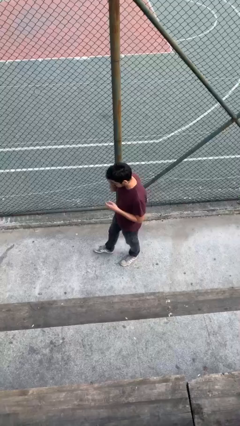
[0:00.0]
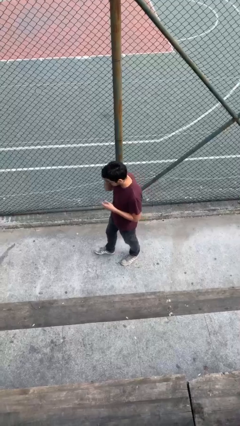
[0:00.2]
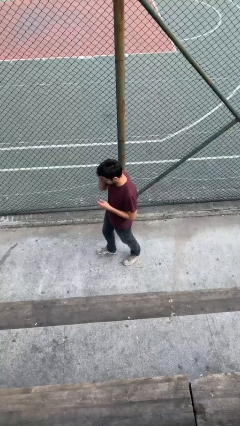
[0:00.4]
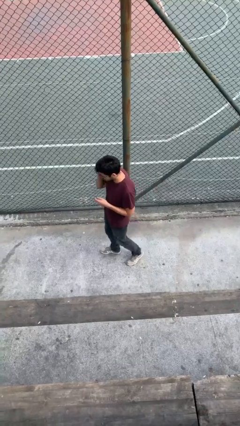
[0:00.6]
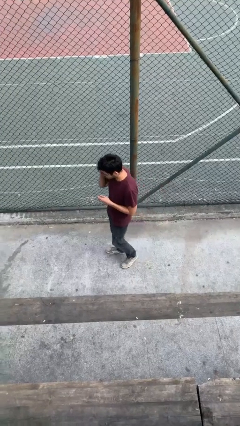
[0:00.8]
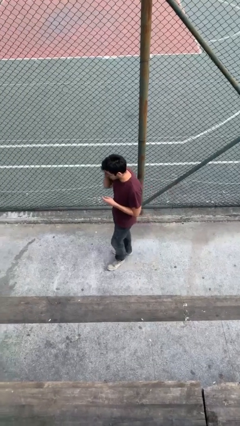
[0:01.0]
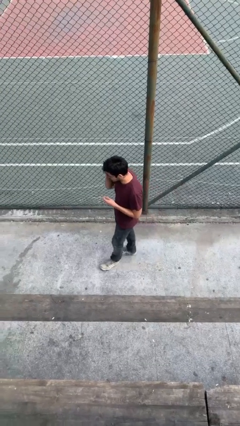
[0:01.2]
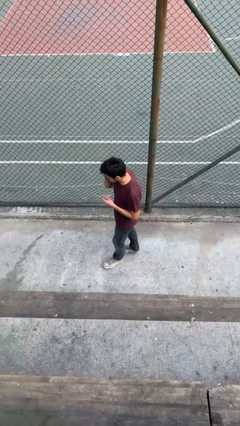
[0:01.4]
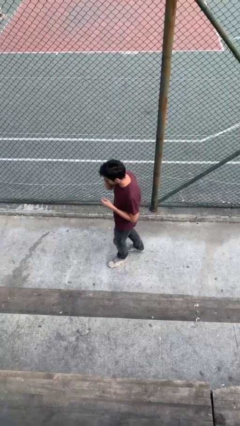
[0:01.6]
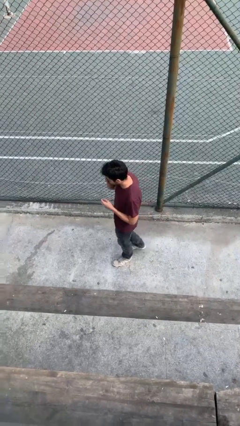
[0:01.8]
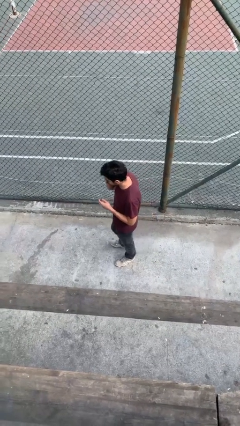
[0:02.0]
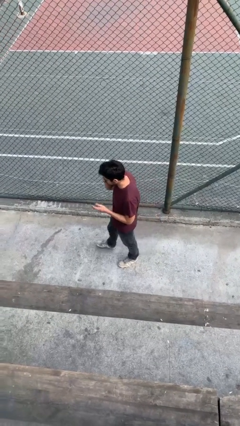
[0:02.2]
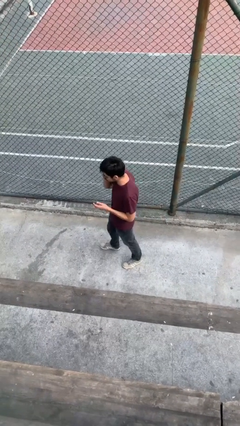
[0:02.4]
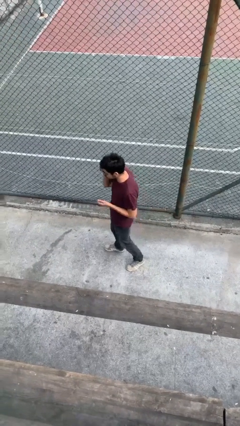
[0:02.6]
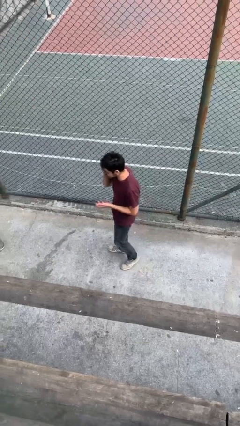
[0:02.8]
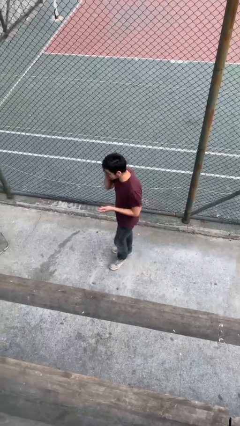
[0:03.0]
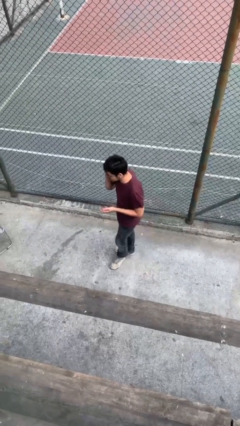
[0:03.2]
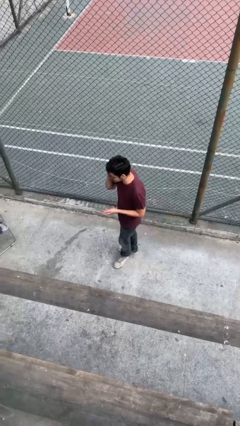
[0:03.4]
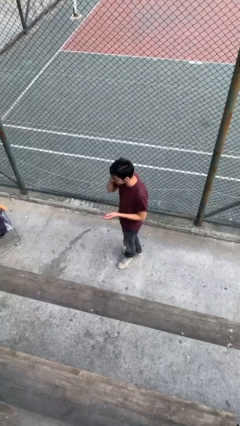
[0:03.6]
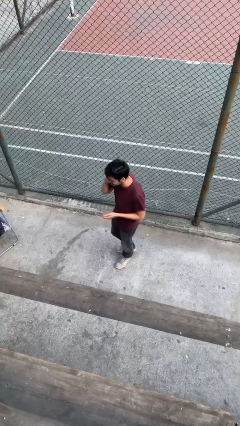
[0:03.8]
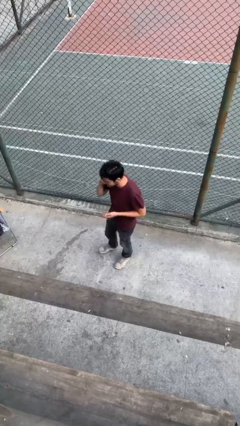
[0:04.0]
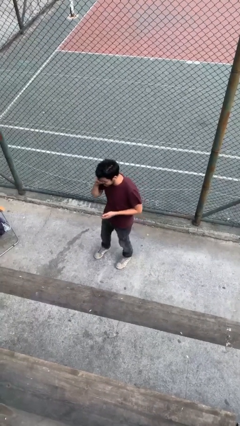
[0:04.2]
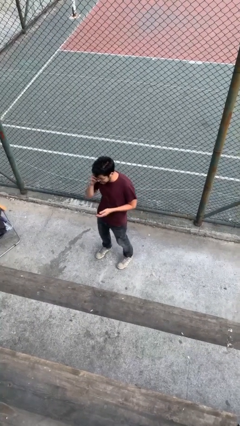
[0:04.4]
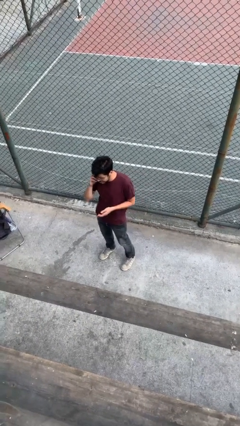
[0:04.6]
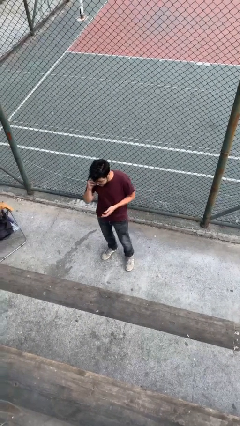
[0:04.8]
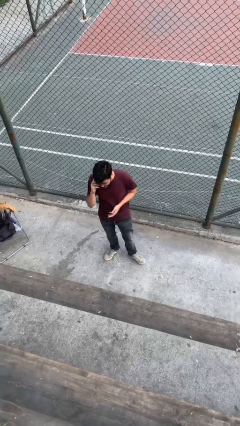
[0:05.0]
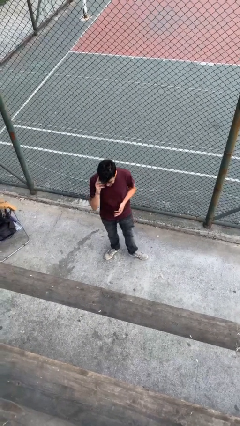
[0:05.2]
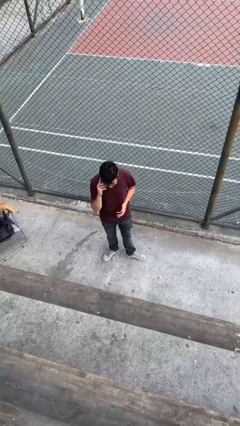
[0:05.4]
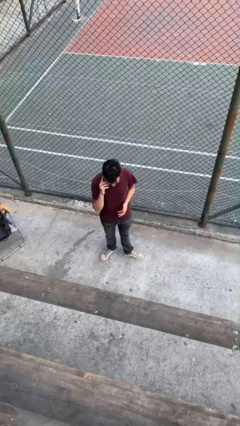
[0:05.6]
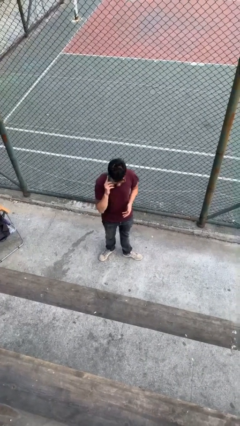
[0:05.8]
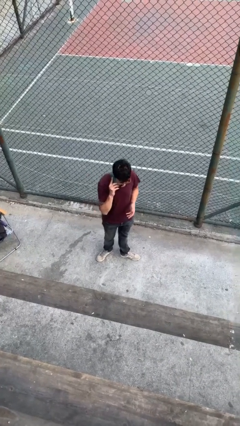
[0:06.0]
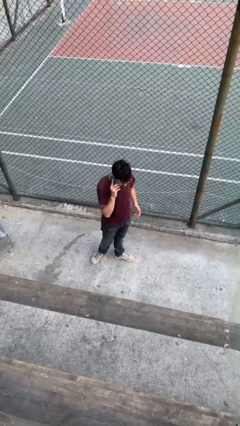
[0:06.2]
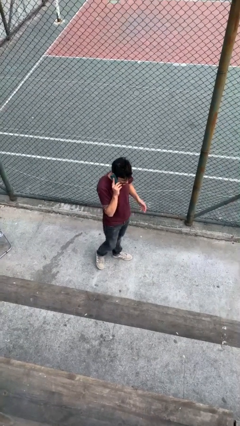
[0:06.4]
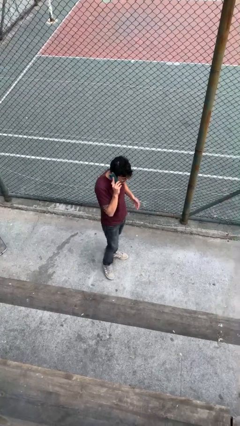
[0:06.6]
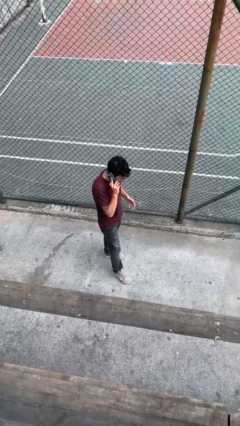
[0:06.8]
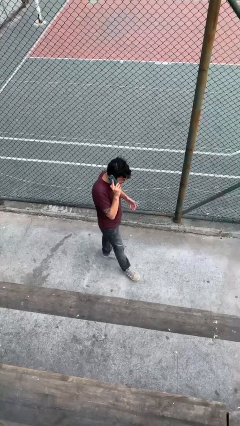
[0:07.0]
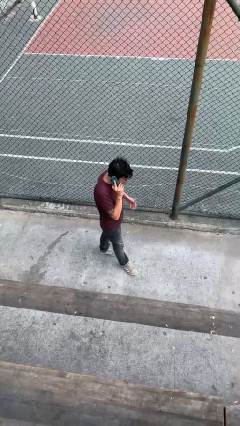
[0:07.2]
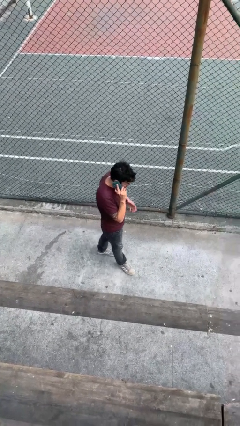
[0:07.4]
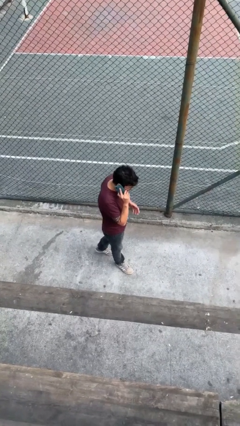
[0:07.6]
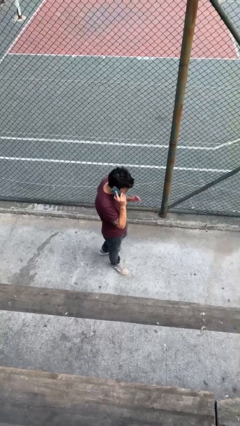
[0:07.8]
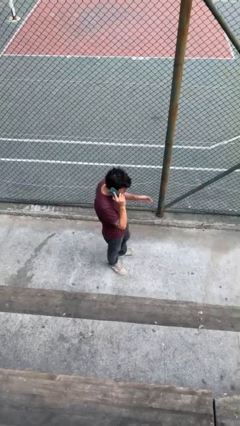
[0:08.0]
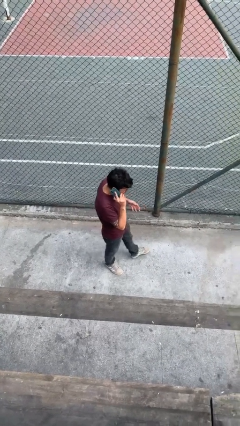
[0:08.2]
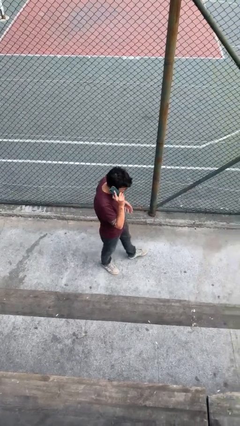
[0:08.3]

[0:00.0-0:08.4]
person talks on phone

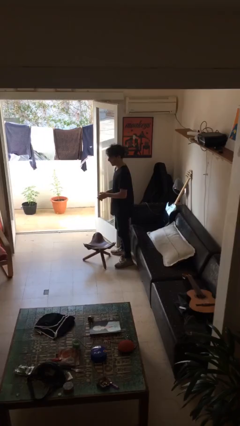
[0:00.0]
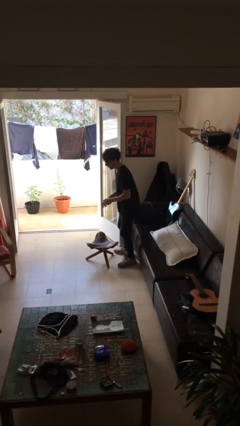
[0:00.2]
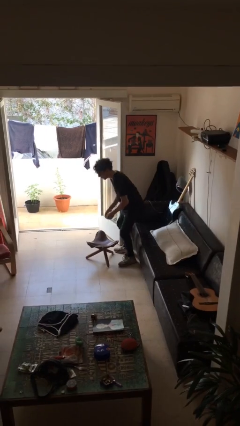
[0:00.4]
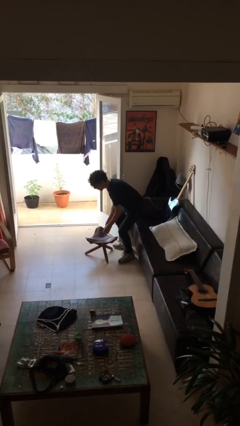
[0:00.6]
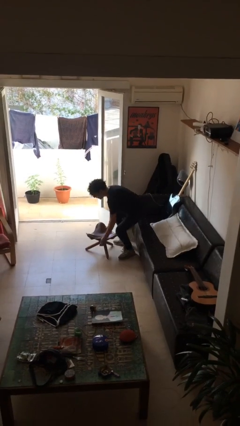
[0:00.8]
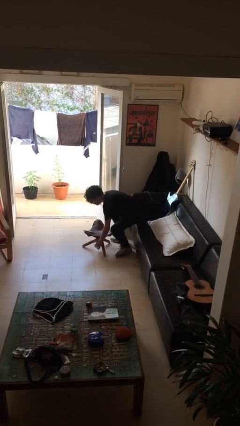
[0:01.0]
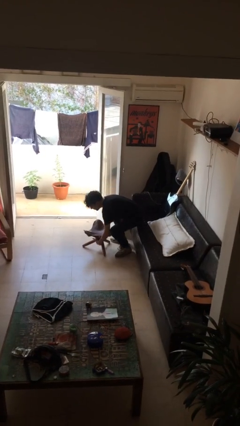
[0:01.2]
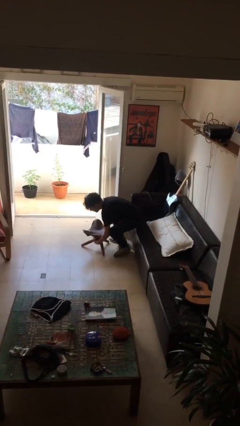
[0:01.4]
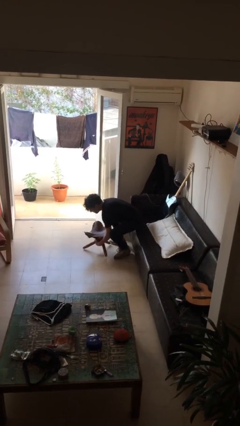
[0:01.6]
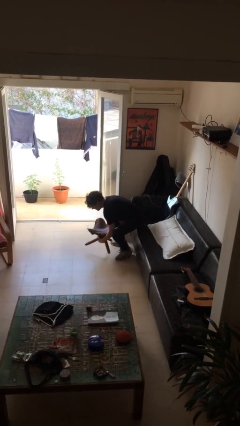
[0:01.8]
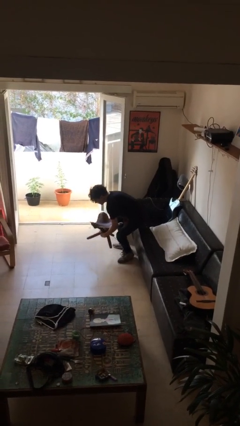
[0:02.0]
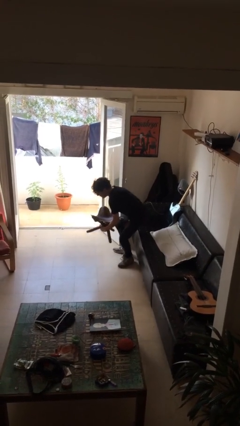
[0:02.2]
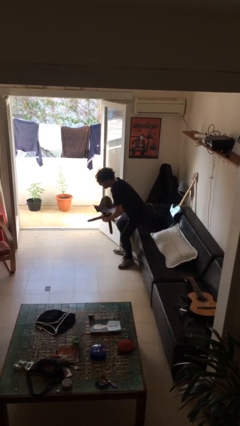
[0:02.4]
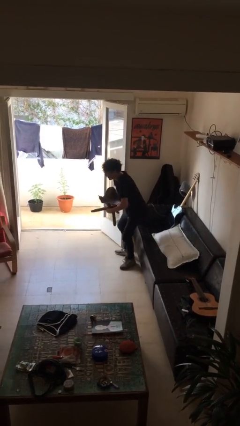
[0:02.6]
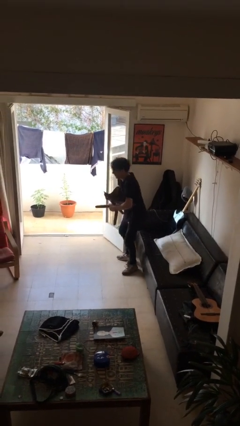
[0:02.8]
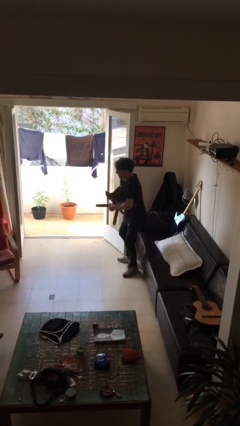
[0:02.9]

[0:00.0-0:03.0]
person picks up object from floor

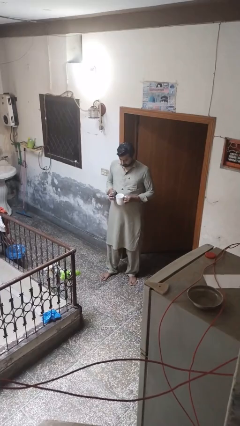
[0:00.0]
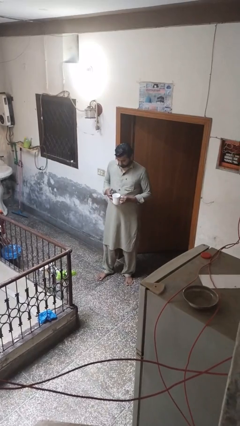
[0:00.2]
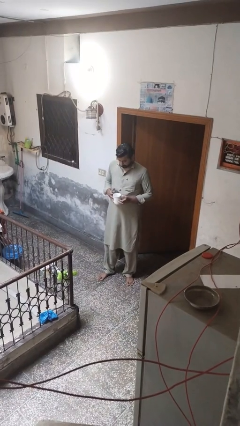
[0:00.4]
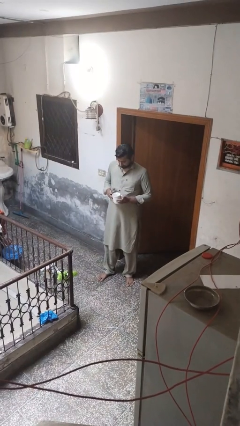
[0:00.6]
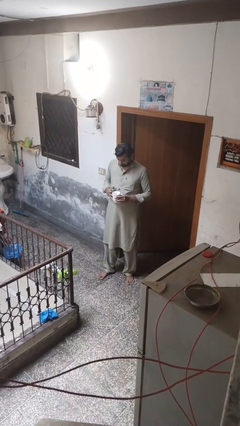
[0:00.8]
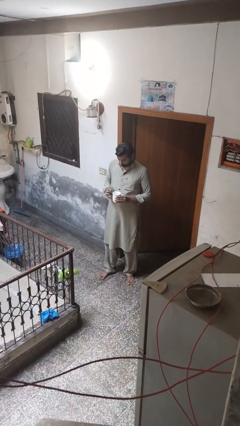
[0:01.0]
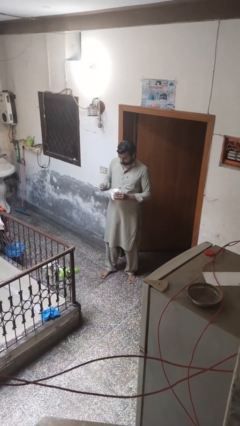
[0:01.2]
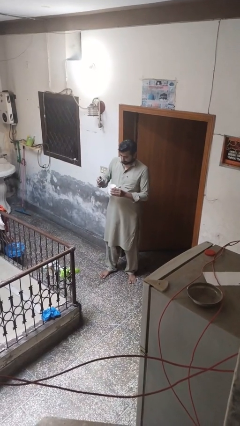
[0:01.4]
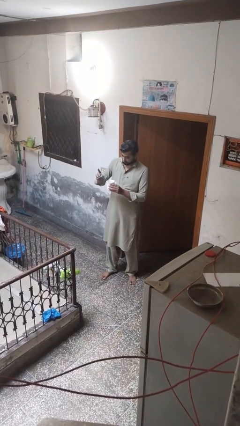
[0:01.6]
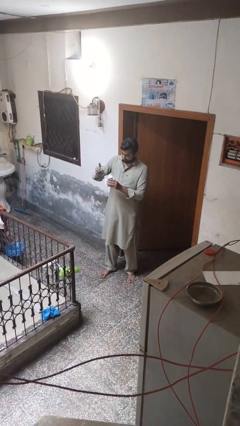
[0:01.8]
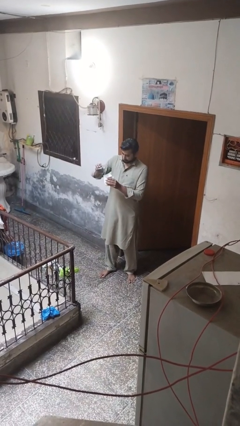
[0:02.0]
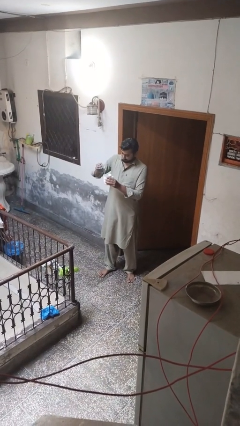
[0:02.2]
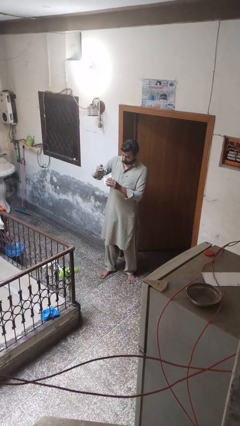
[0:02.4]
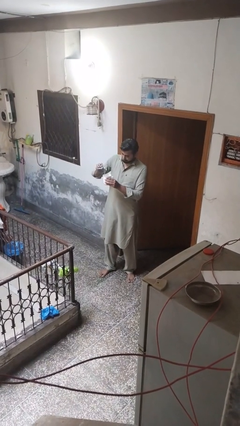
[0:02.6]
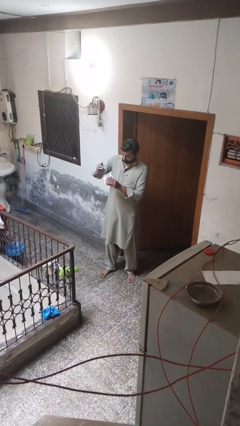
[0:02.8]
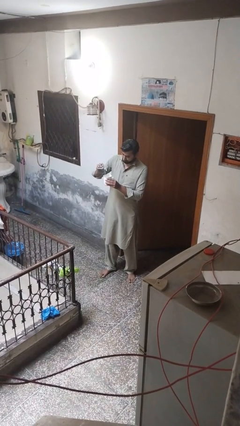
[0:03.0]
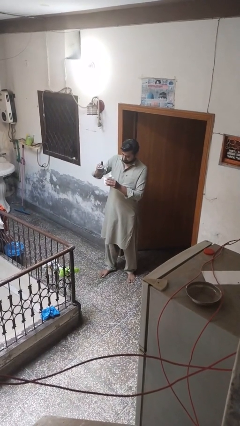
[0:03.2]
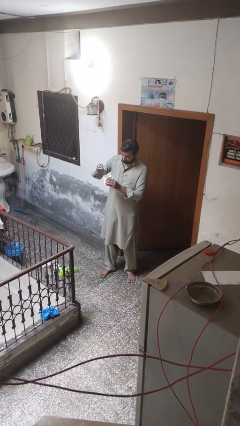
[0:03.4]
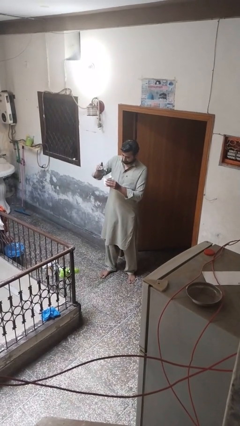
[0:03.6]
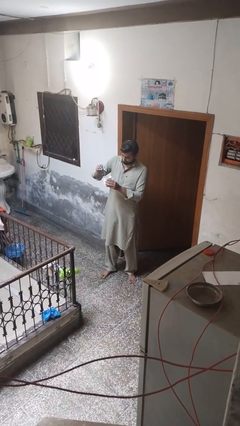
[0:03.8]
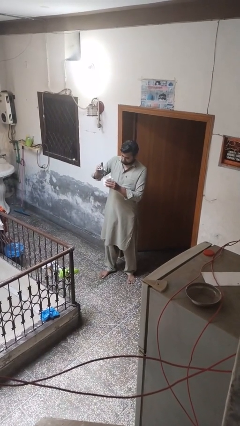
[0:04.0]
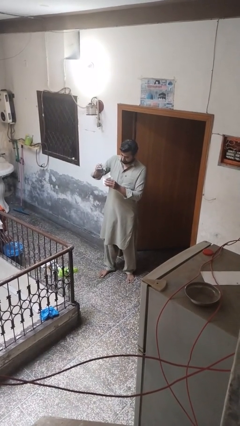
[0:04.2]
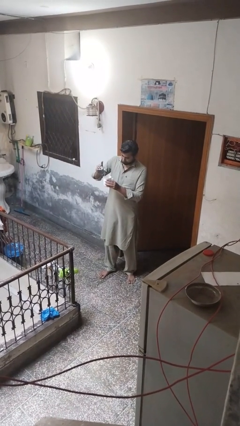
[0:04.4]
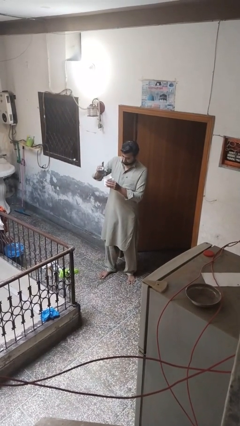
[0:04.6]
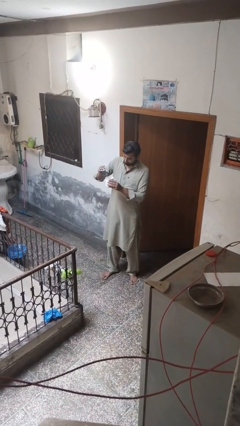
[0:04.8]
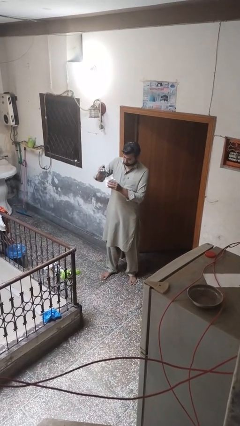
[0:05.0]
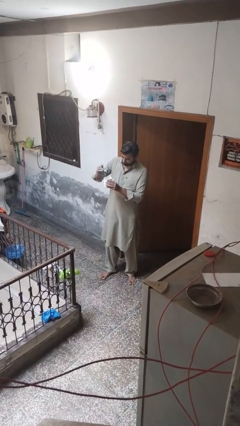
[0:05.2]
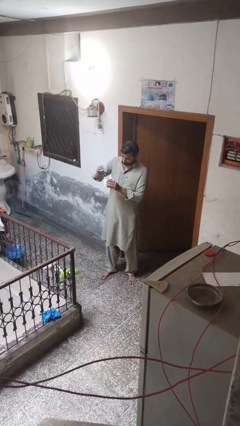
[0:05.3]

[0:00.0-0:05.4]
person pours coffee into mug

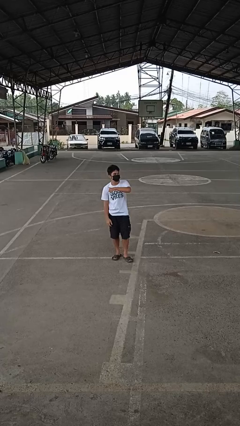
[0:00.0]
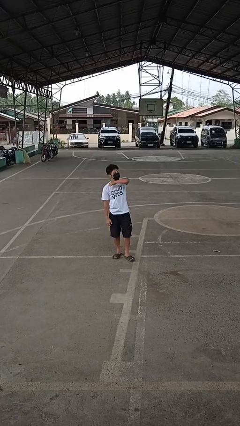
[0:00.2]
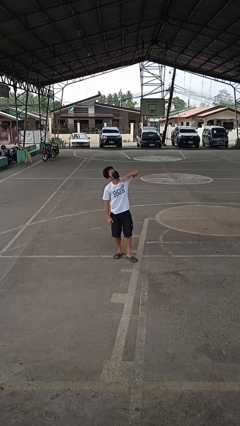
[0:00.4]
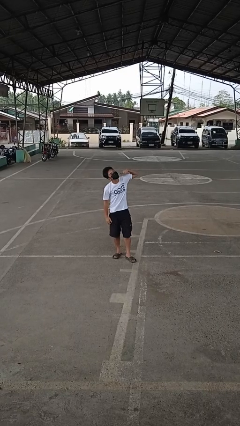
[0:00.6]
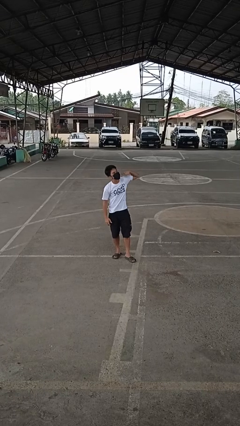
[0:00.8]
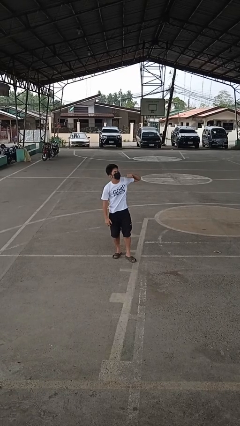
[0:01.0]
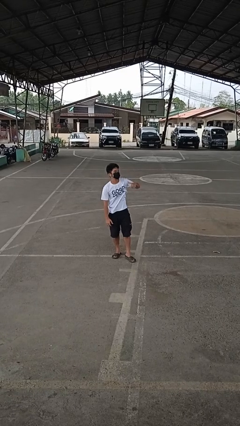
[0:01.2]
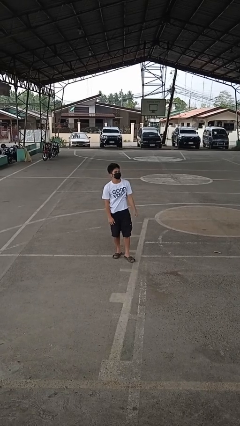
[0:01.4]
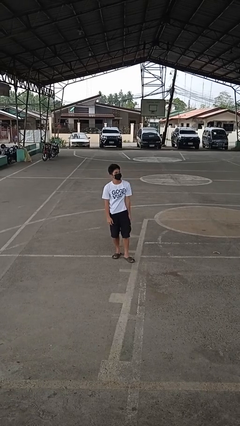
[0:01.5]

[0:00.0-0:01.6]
person gestures cut
